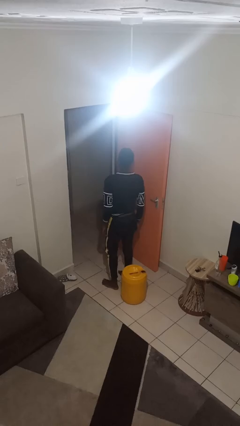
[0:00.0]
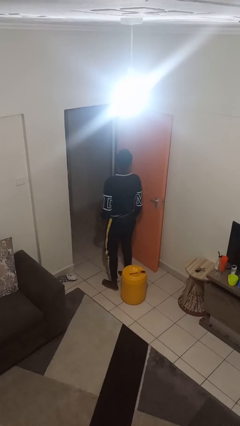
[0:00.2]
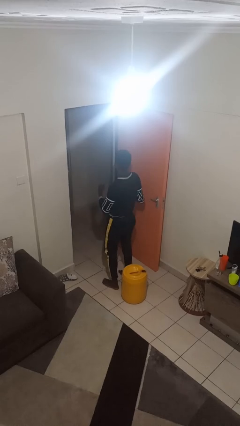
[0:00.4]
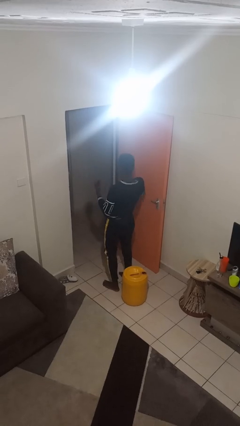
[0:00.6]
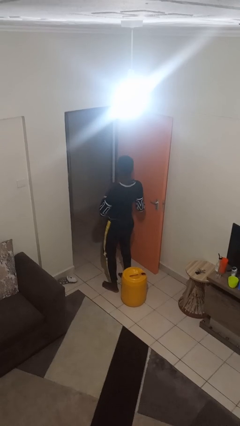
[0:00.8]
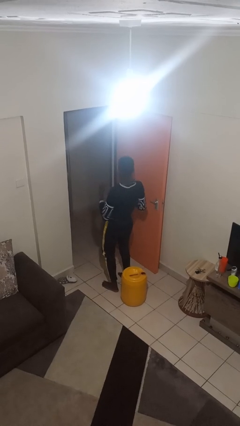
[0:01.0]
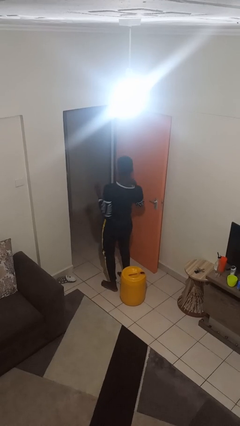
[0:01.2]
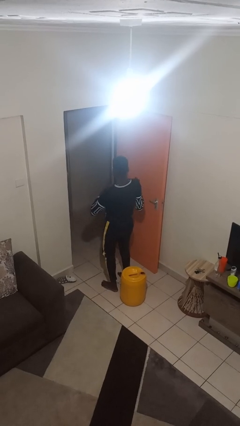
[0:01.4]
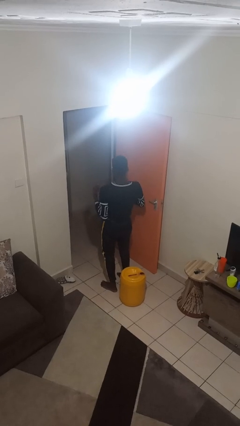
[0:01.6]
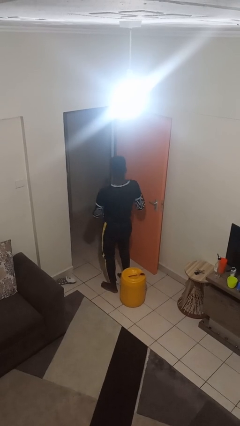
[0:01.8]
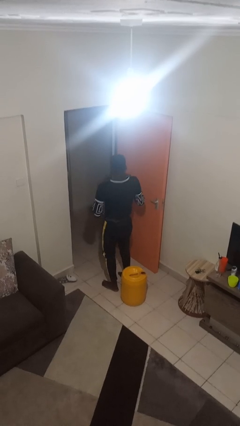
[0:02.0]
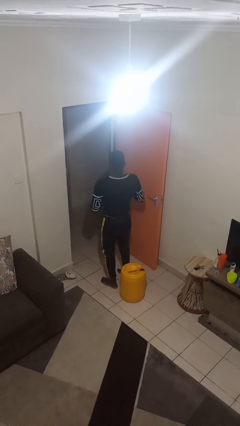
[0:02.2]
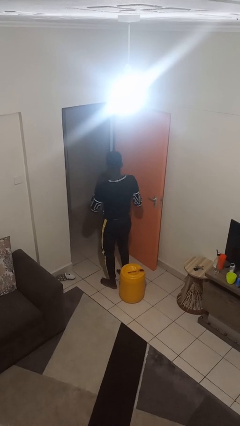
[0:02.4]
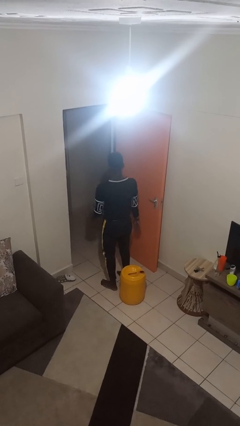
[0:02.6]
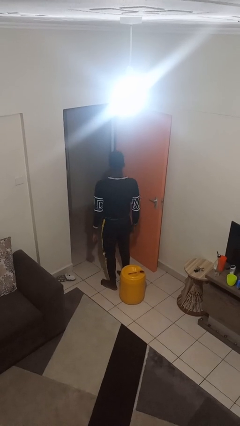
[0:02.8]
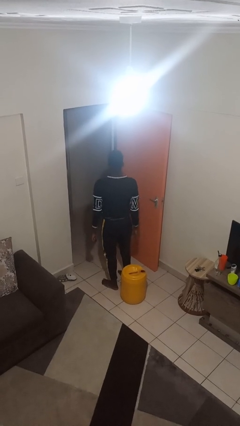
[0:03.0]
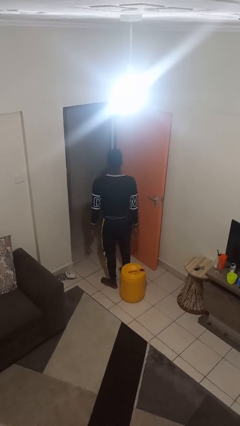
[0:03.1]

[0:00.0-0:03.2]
person drums on chest

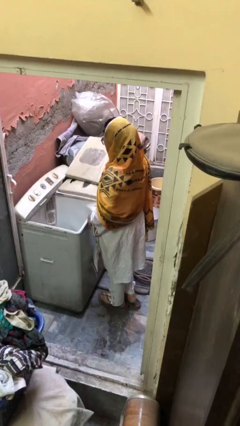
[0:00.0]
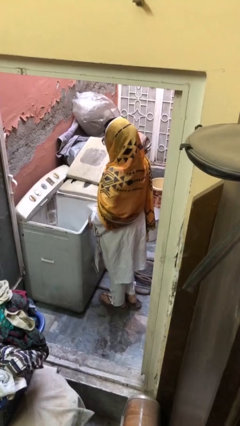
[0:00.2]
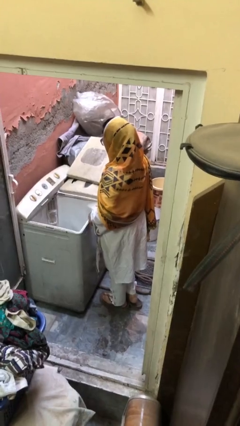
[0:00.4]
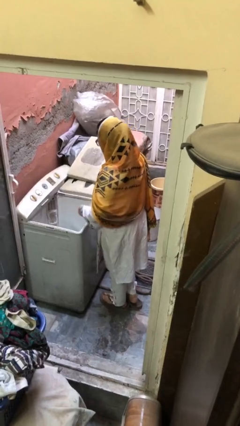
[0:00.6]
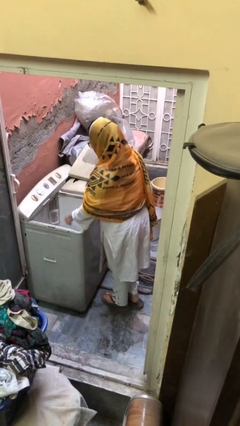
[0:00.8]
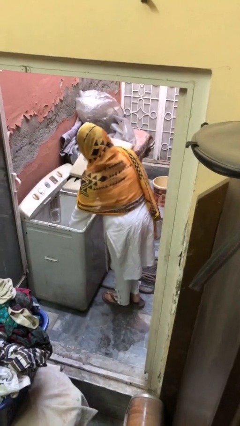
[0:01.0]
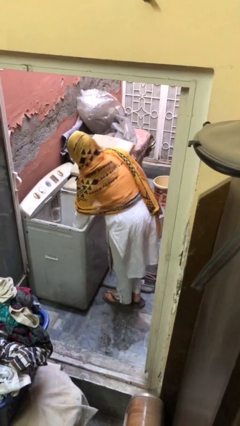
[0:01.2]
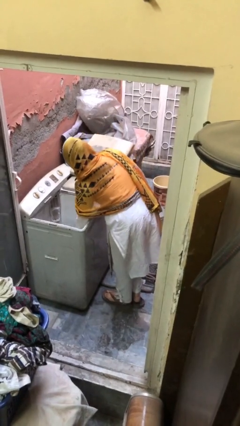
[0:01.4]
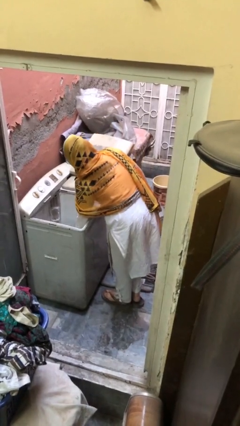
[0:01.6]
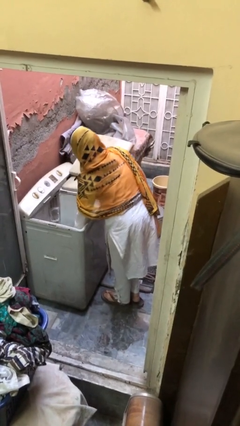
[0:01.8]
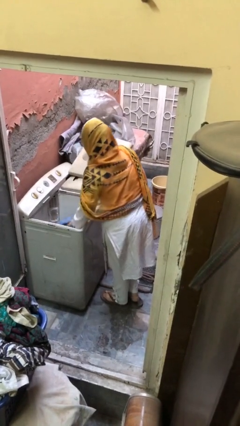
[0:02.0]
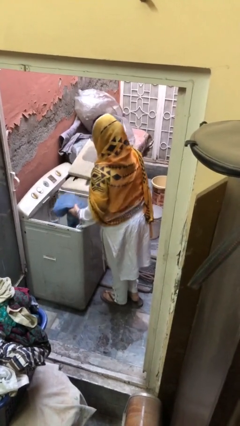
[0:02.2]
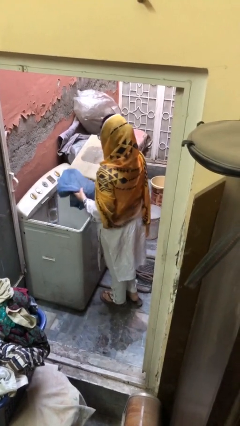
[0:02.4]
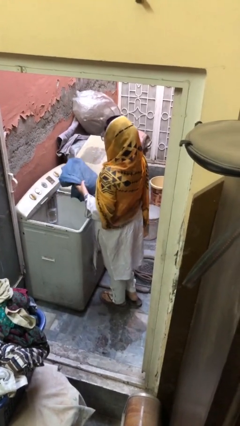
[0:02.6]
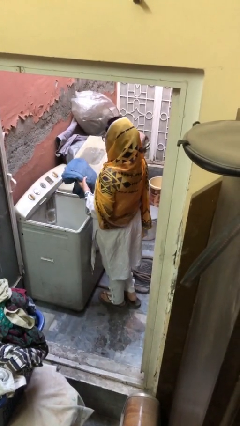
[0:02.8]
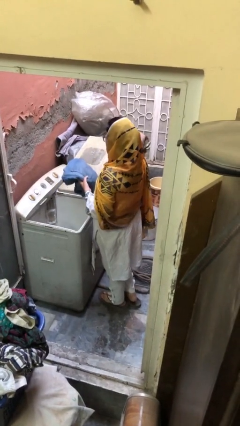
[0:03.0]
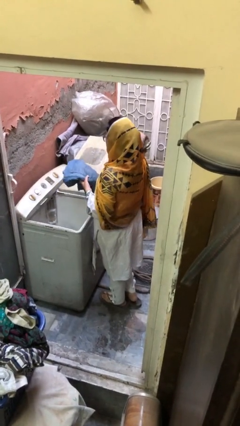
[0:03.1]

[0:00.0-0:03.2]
person unloads clotheswasher

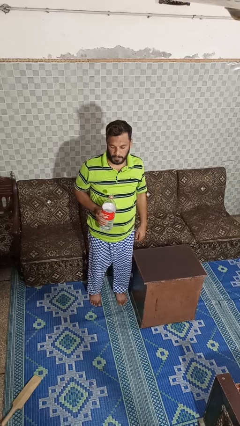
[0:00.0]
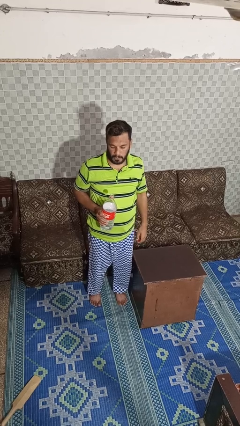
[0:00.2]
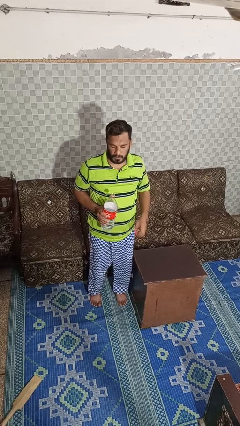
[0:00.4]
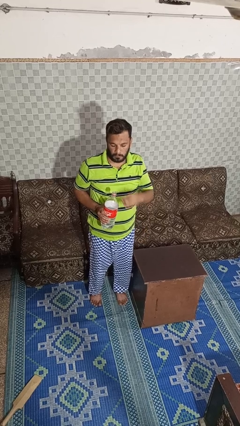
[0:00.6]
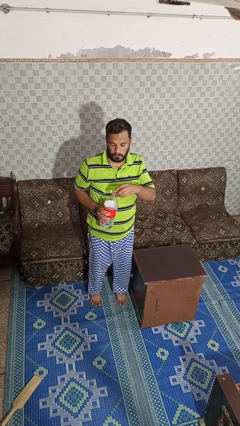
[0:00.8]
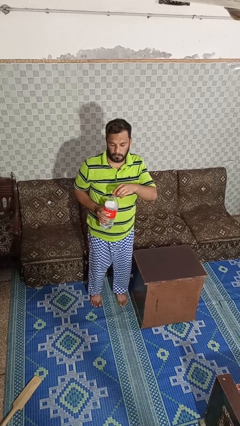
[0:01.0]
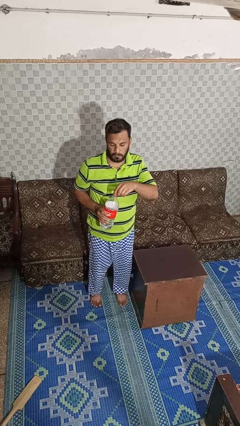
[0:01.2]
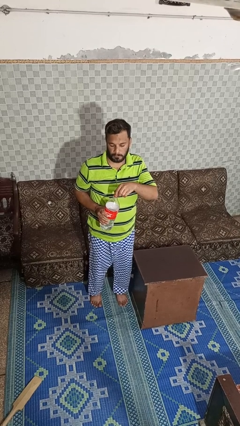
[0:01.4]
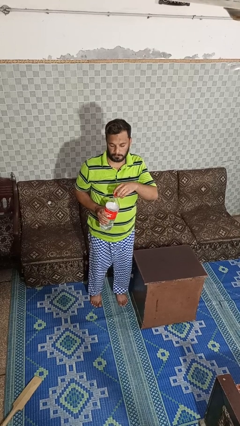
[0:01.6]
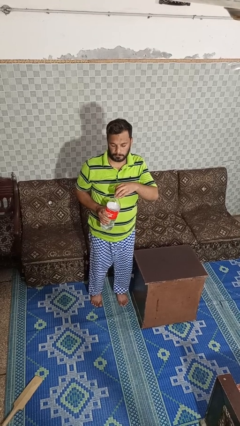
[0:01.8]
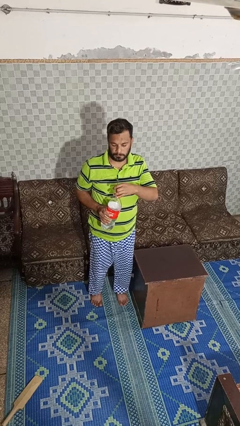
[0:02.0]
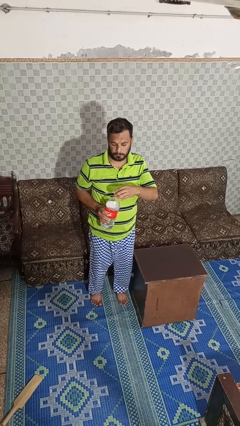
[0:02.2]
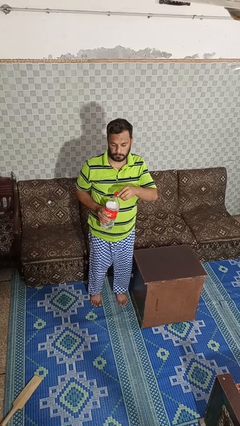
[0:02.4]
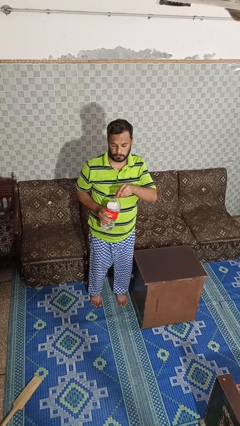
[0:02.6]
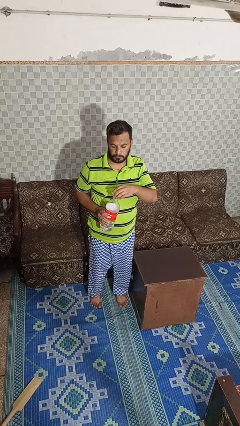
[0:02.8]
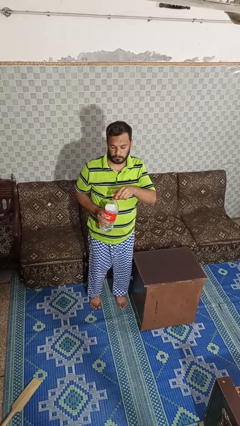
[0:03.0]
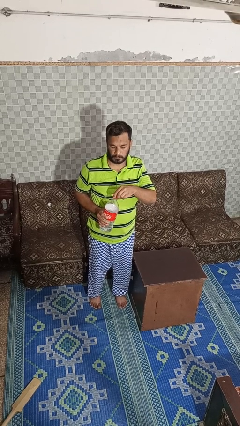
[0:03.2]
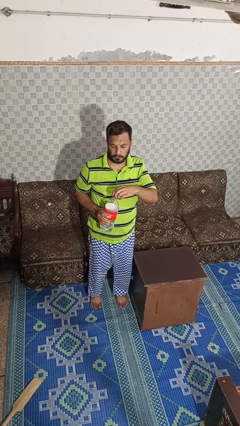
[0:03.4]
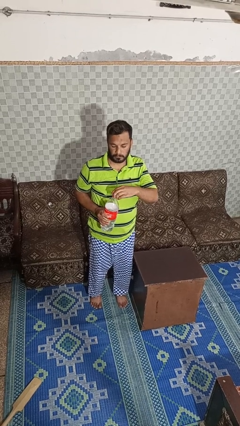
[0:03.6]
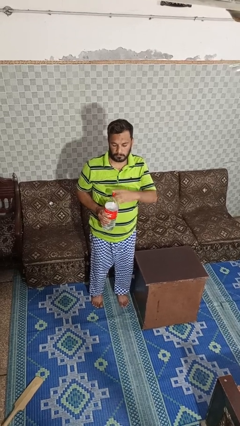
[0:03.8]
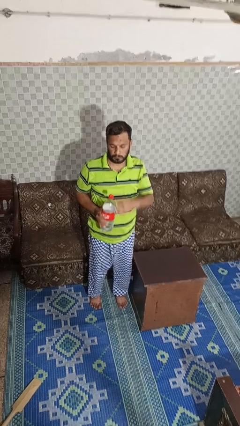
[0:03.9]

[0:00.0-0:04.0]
person screws lid to bottle

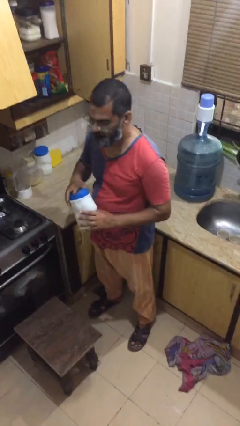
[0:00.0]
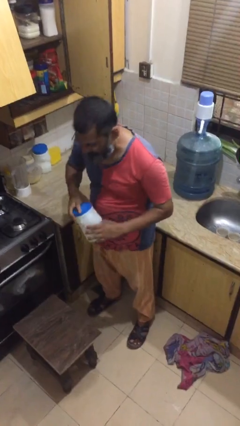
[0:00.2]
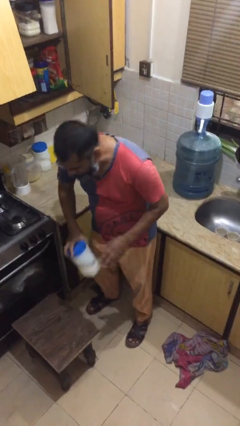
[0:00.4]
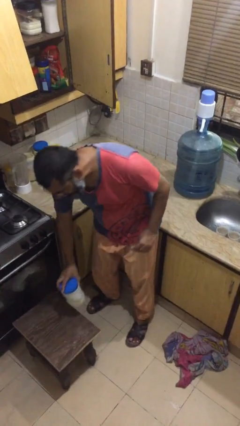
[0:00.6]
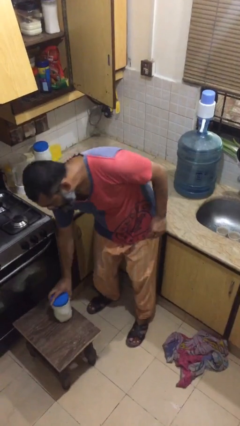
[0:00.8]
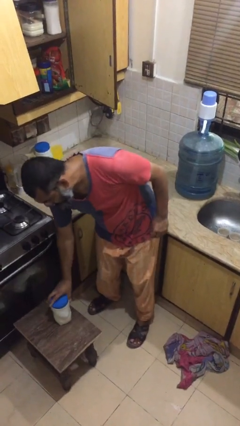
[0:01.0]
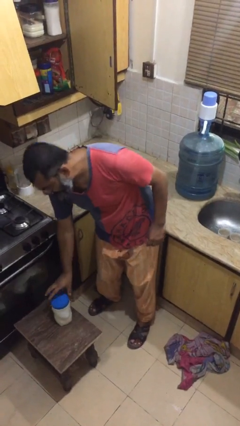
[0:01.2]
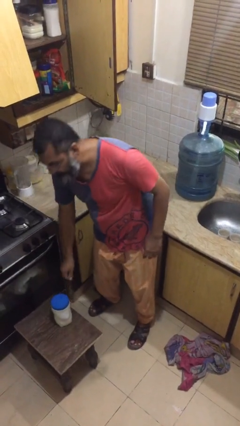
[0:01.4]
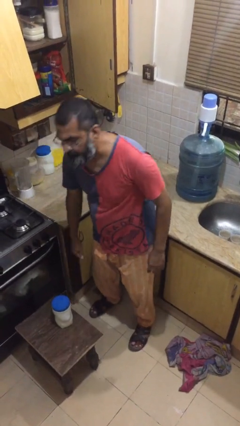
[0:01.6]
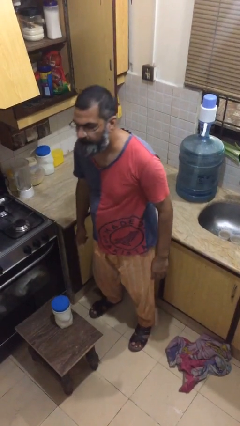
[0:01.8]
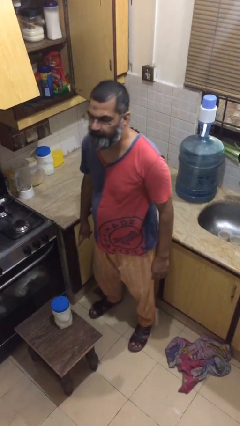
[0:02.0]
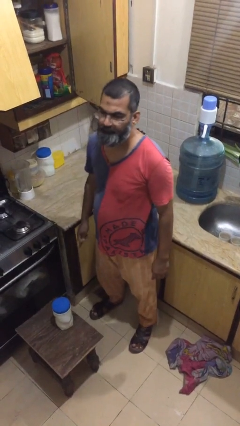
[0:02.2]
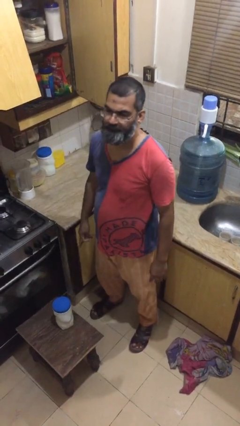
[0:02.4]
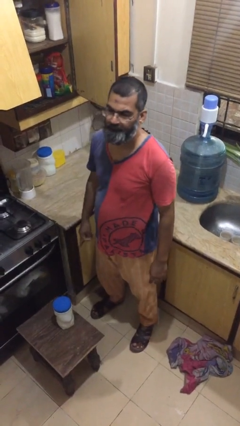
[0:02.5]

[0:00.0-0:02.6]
person puts down object on table

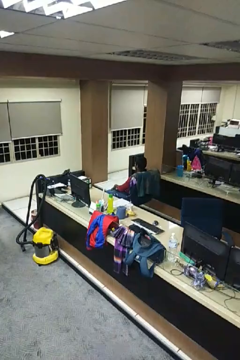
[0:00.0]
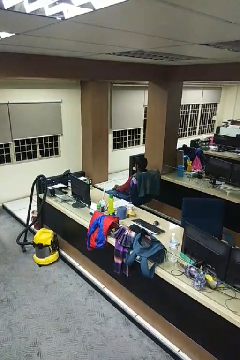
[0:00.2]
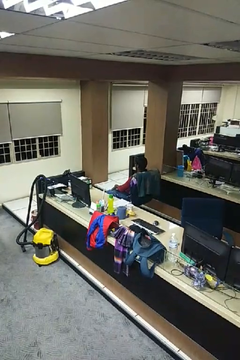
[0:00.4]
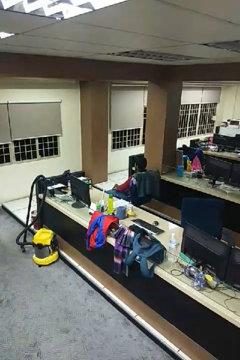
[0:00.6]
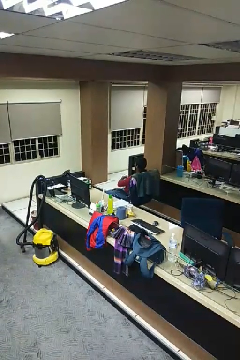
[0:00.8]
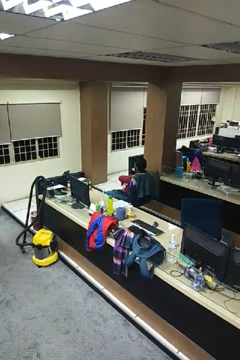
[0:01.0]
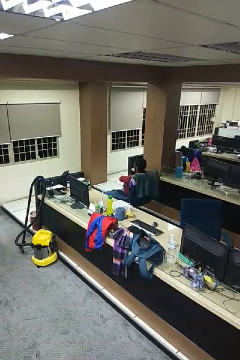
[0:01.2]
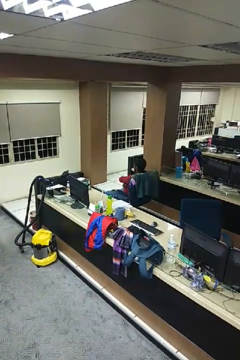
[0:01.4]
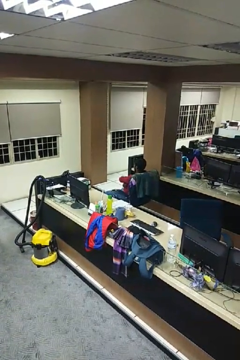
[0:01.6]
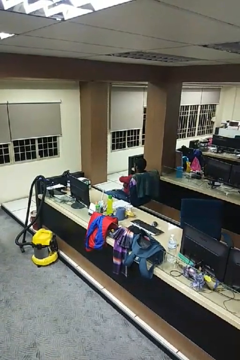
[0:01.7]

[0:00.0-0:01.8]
person crosses arms

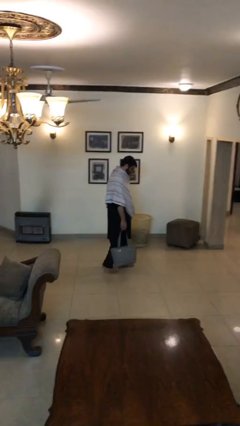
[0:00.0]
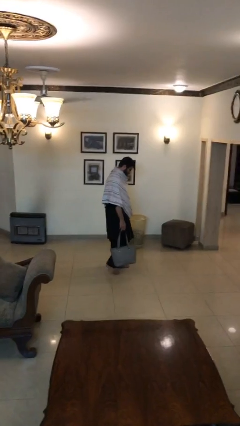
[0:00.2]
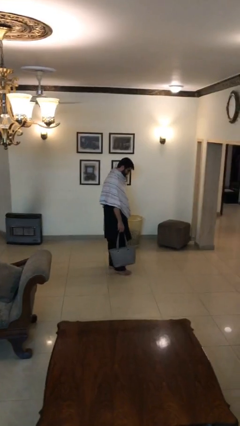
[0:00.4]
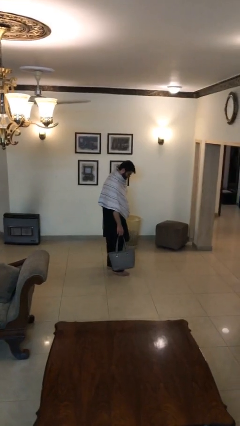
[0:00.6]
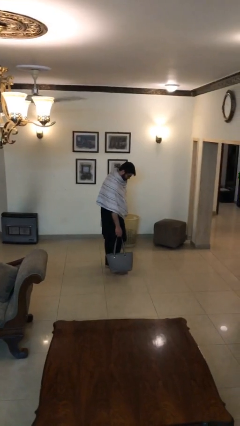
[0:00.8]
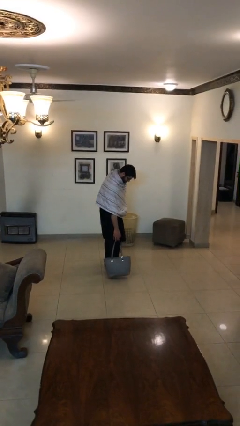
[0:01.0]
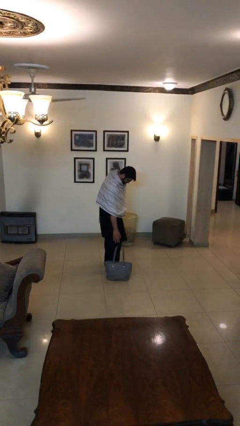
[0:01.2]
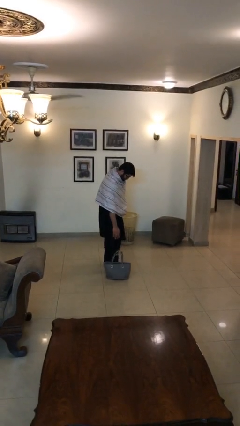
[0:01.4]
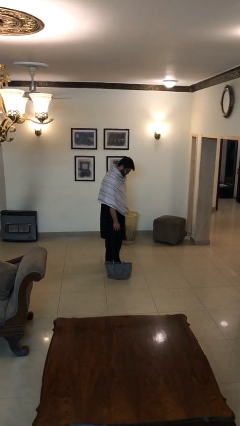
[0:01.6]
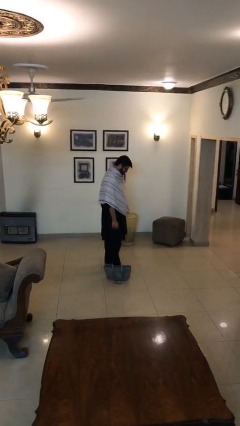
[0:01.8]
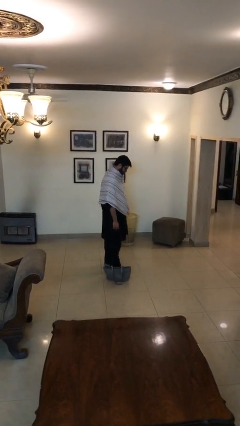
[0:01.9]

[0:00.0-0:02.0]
person puts down object on floor

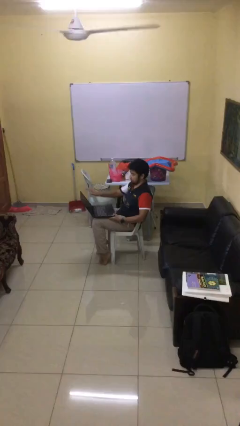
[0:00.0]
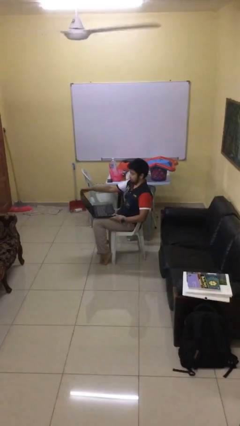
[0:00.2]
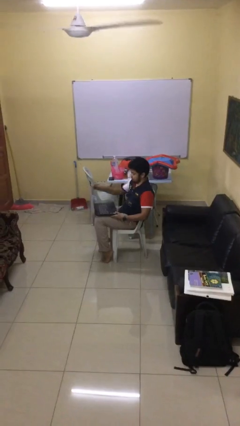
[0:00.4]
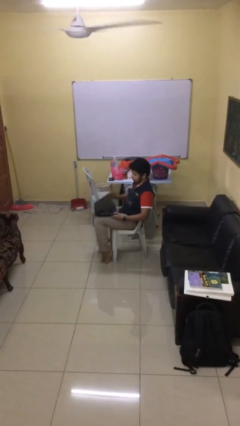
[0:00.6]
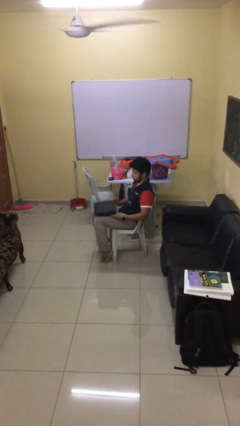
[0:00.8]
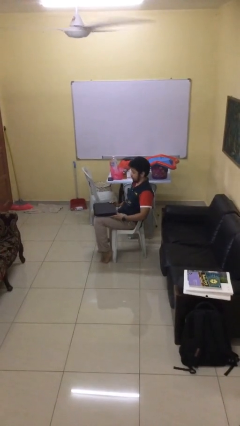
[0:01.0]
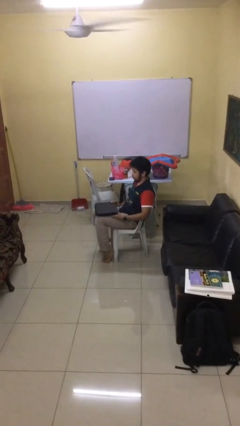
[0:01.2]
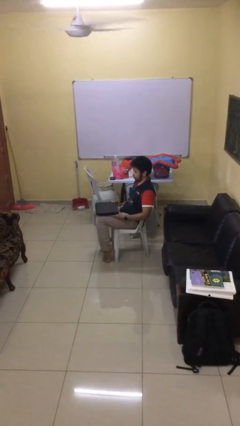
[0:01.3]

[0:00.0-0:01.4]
person closes laptop
